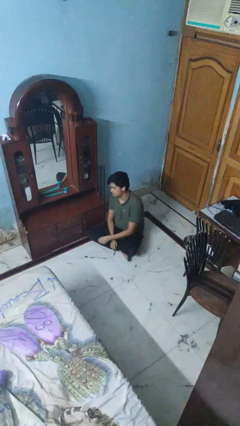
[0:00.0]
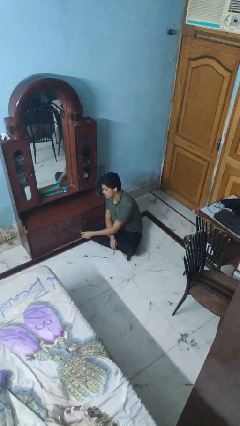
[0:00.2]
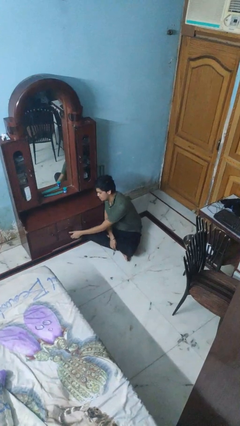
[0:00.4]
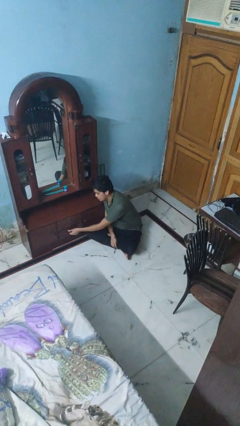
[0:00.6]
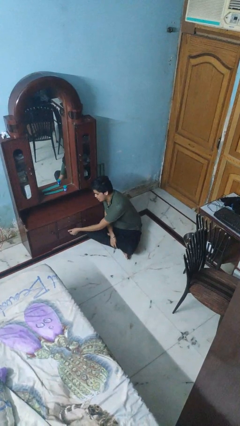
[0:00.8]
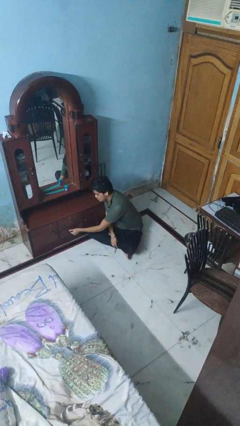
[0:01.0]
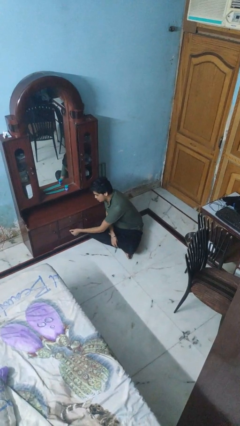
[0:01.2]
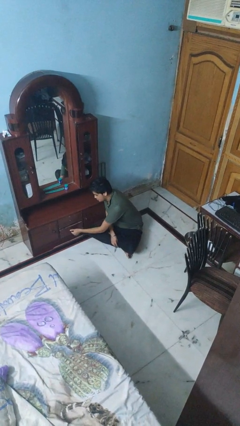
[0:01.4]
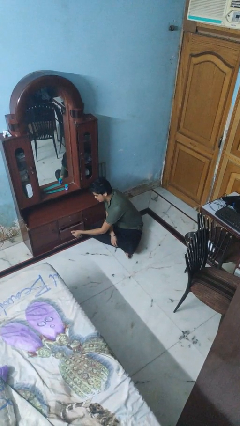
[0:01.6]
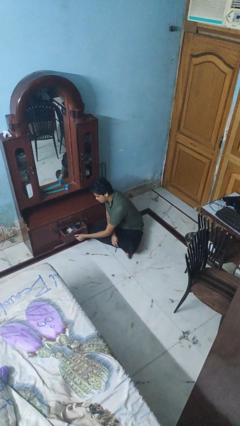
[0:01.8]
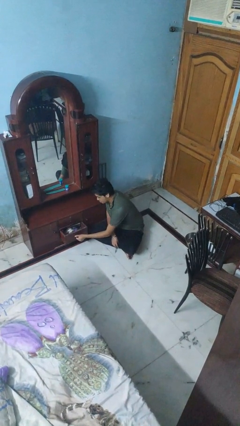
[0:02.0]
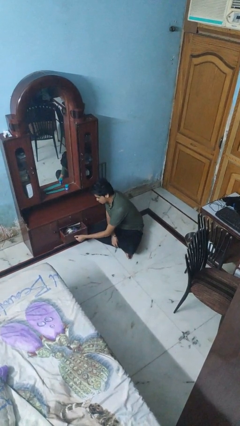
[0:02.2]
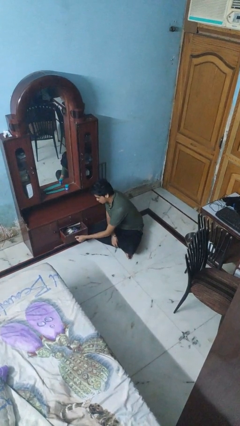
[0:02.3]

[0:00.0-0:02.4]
person opens dresser drawer

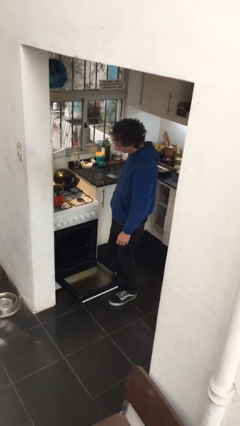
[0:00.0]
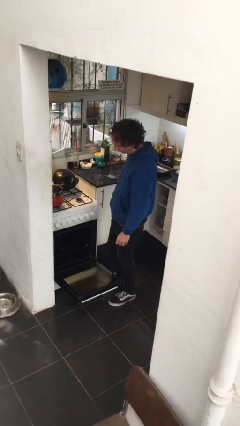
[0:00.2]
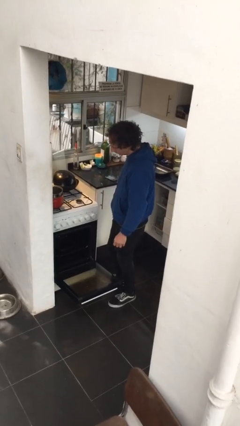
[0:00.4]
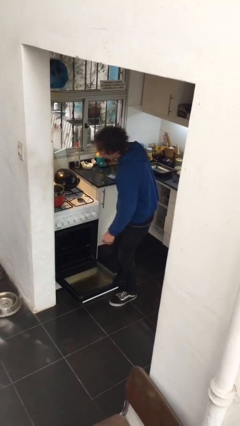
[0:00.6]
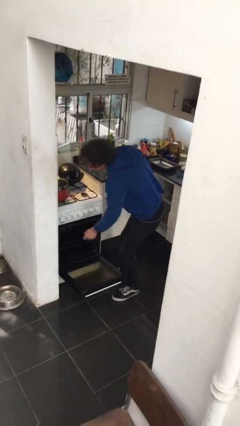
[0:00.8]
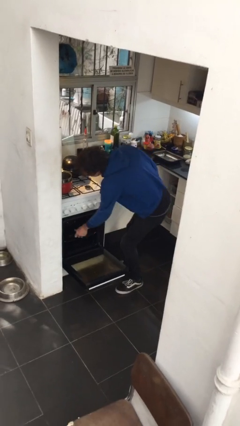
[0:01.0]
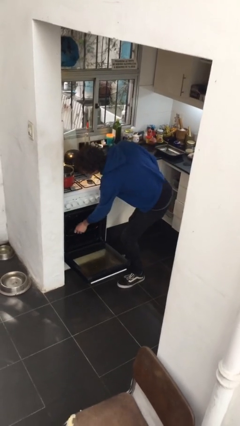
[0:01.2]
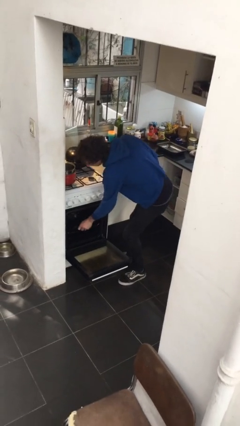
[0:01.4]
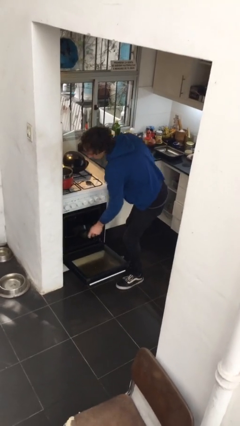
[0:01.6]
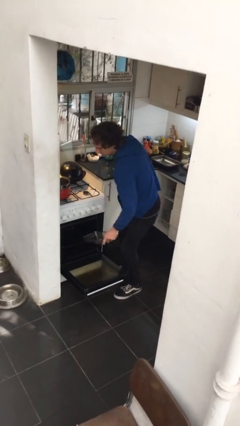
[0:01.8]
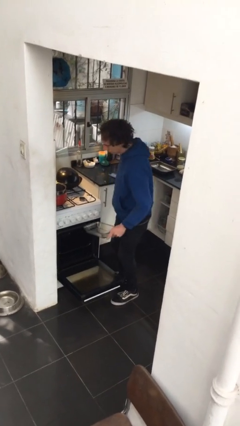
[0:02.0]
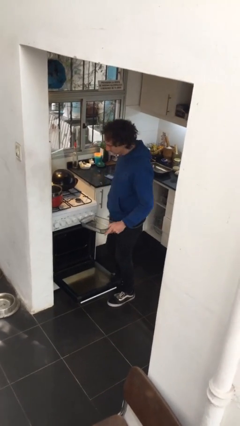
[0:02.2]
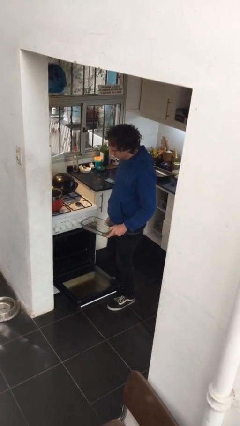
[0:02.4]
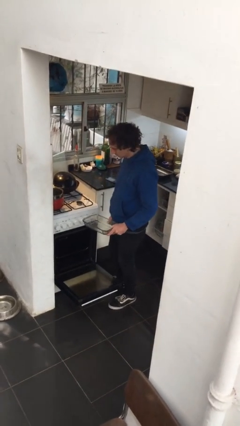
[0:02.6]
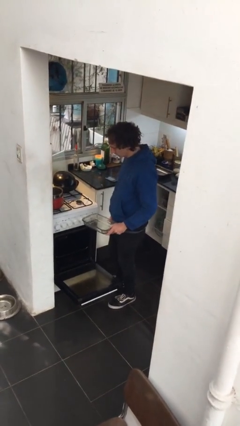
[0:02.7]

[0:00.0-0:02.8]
person takes object from oven

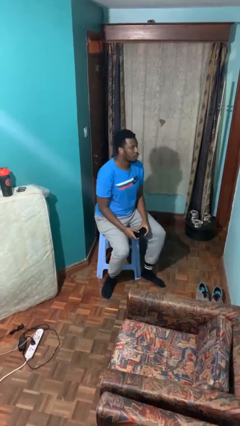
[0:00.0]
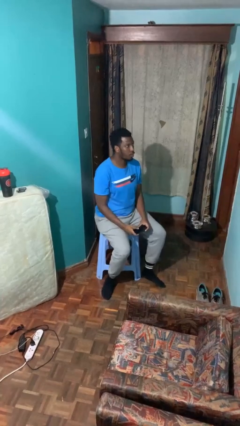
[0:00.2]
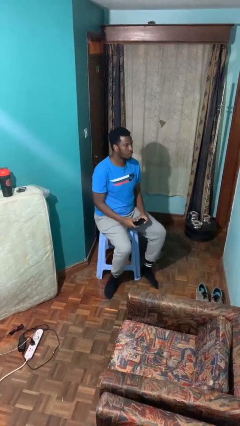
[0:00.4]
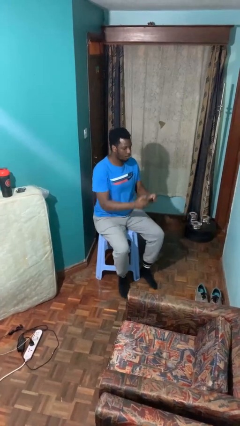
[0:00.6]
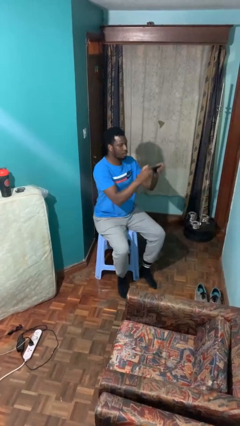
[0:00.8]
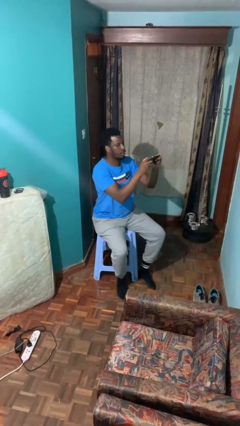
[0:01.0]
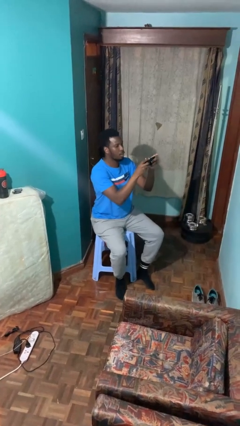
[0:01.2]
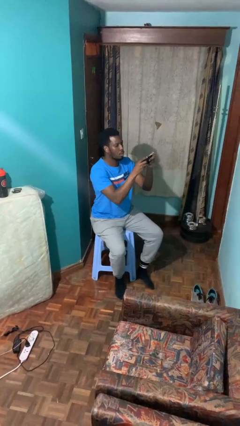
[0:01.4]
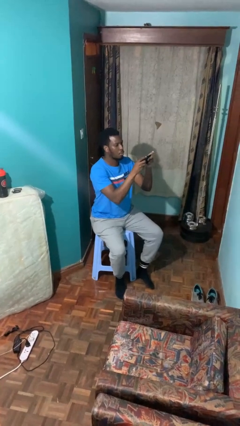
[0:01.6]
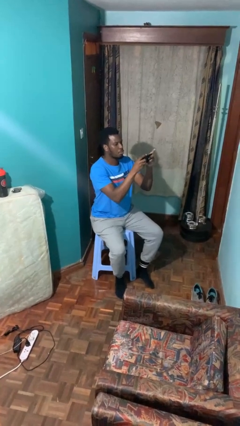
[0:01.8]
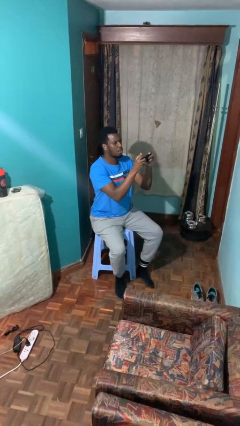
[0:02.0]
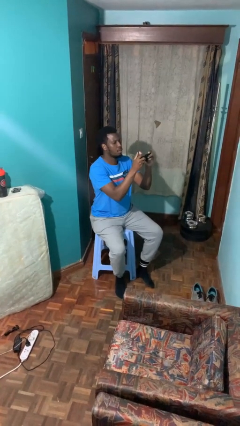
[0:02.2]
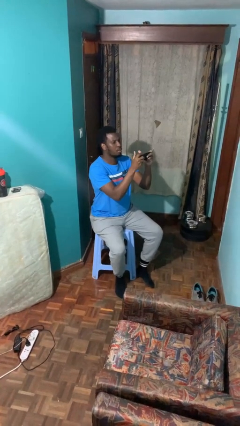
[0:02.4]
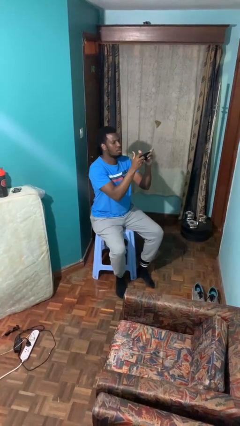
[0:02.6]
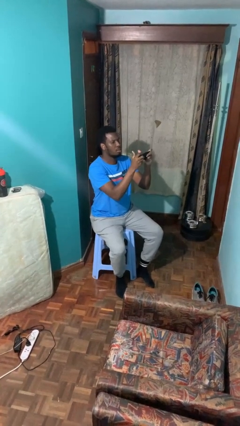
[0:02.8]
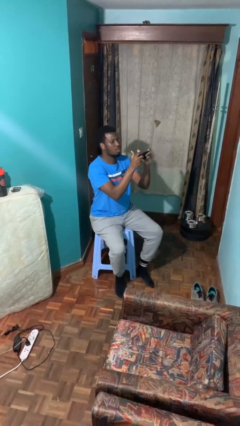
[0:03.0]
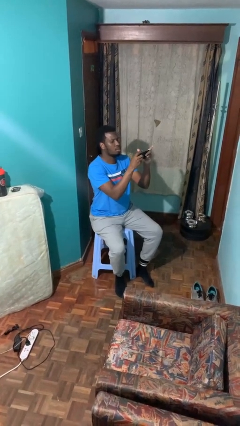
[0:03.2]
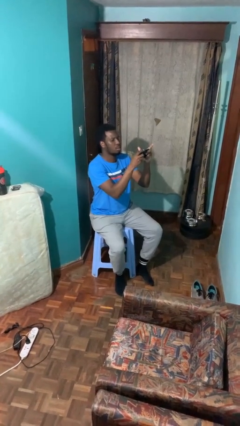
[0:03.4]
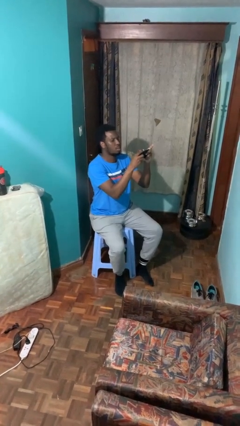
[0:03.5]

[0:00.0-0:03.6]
person interacts with handheld game

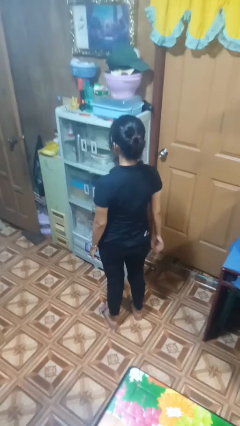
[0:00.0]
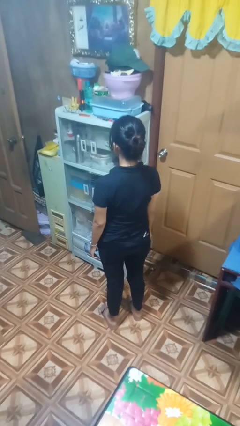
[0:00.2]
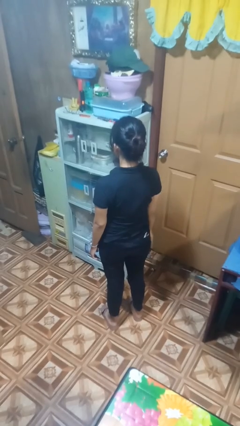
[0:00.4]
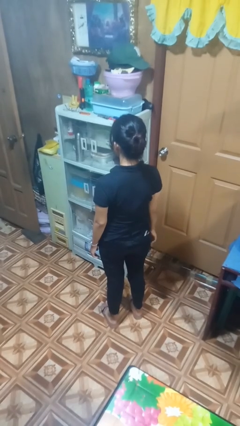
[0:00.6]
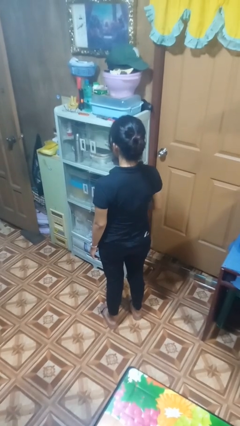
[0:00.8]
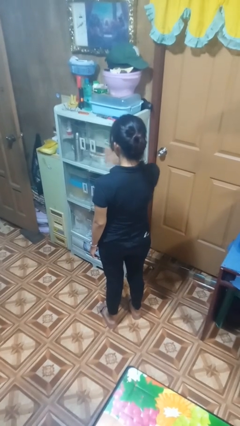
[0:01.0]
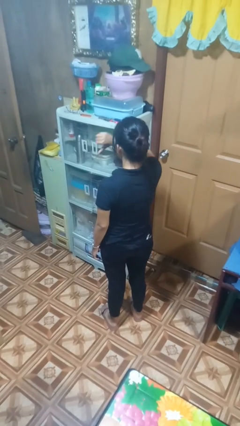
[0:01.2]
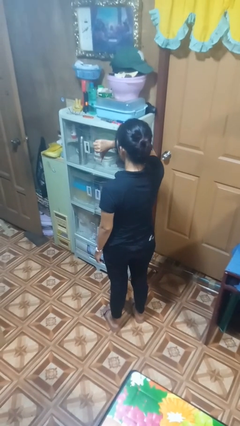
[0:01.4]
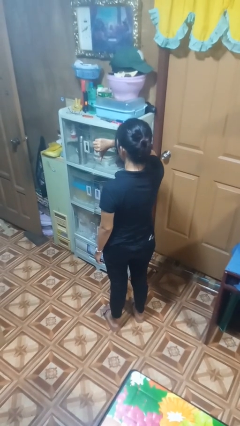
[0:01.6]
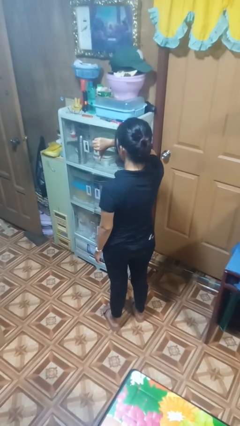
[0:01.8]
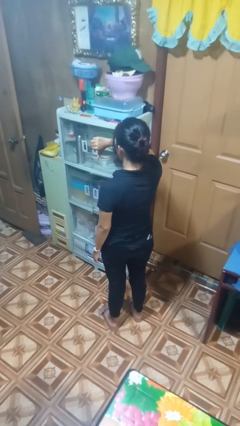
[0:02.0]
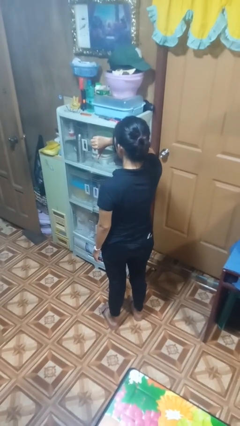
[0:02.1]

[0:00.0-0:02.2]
person gestures thumbs down

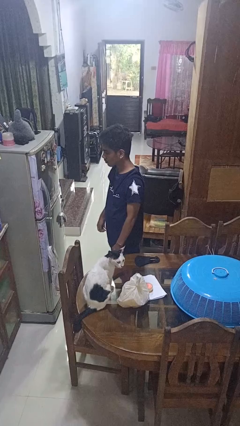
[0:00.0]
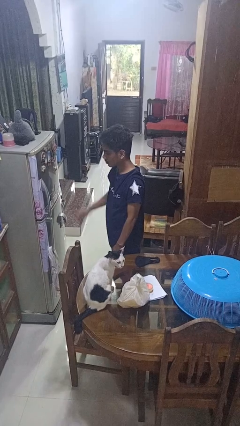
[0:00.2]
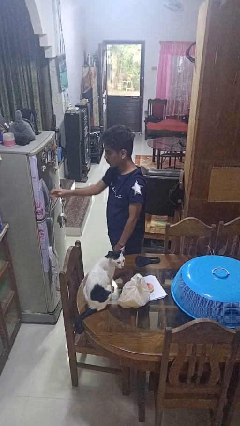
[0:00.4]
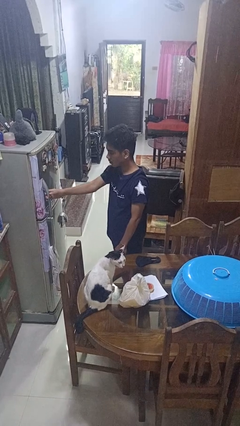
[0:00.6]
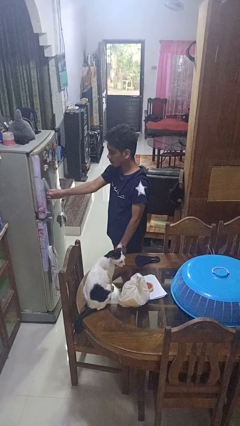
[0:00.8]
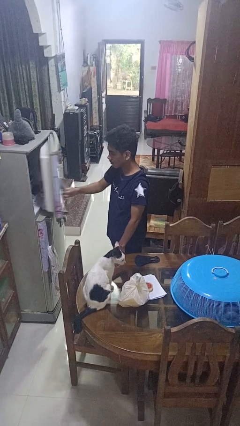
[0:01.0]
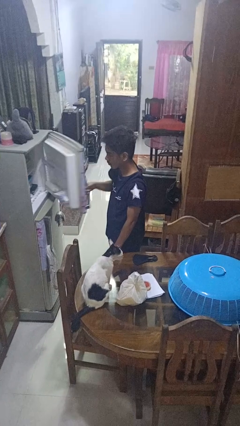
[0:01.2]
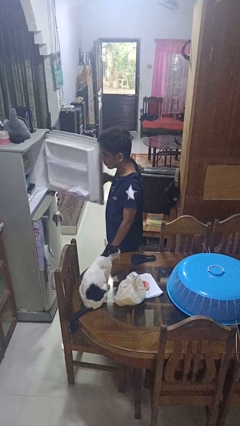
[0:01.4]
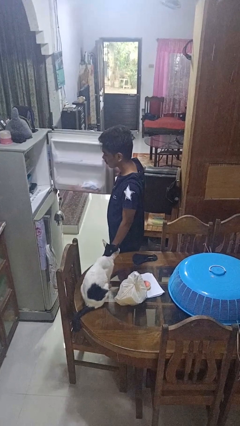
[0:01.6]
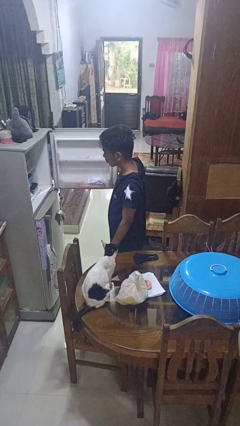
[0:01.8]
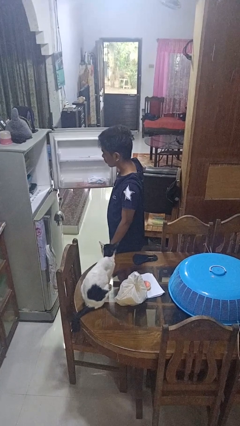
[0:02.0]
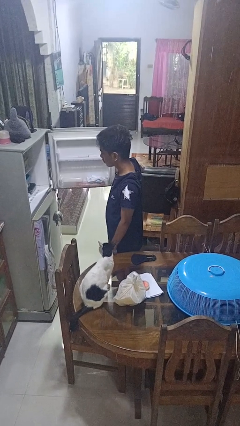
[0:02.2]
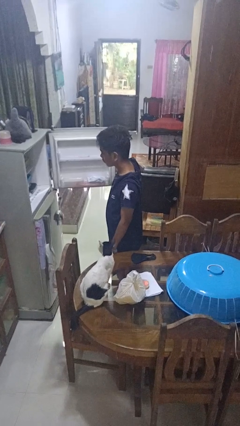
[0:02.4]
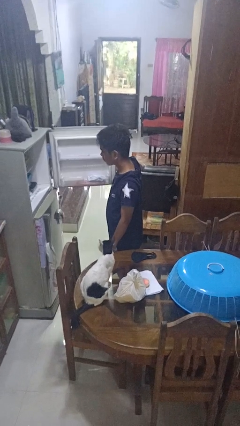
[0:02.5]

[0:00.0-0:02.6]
person opens refrigerator

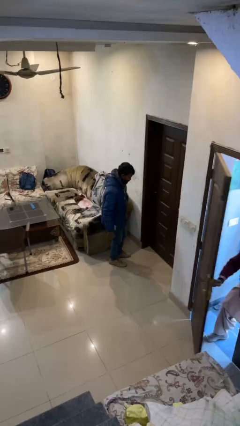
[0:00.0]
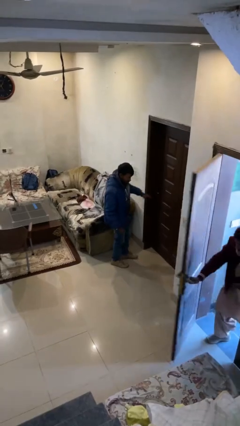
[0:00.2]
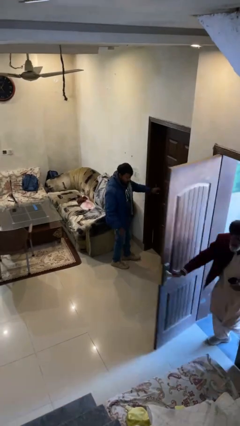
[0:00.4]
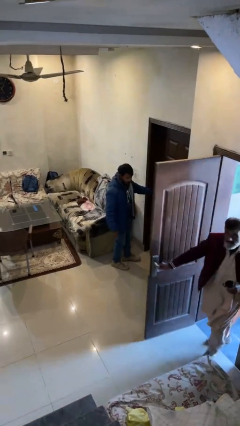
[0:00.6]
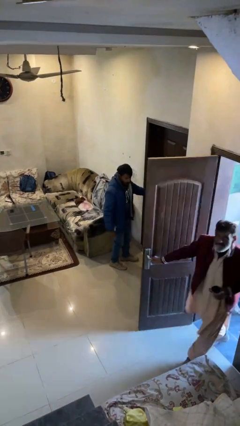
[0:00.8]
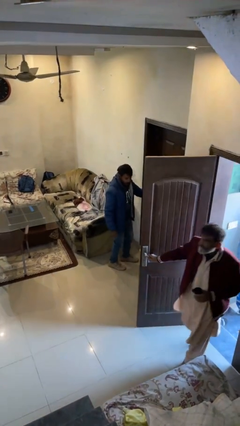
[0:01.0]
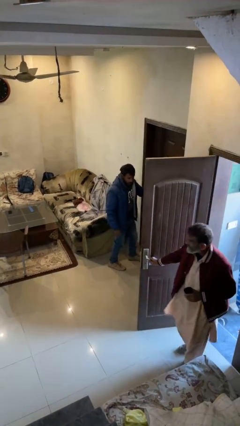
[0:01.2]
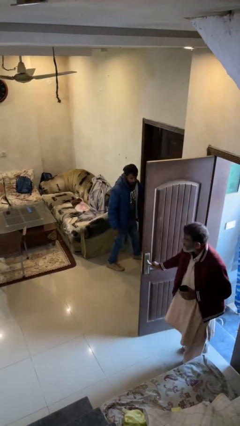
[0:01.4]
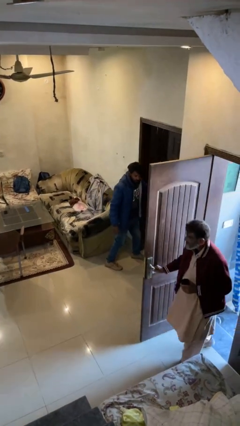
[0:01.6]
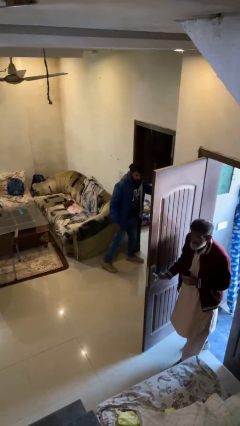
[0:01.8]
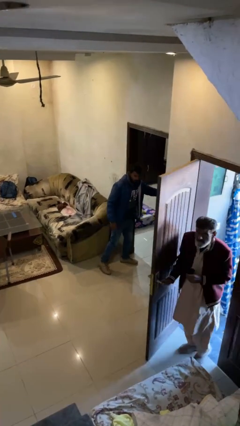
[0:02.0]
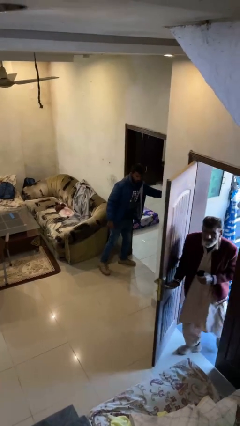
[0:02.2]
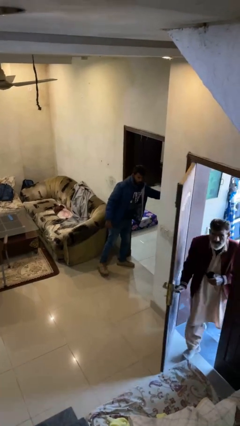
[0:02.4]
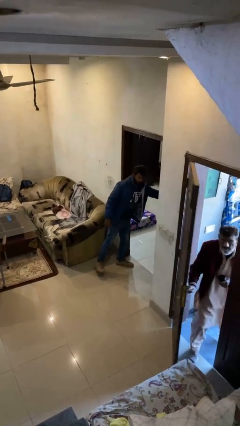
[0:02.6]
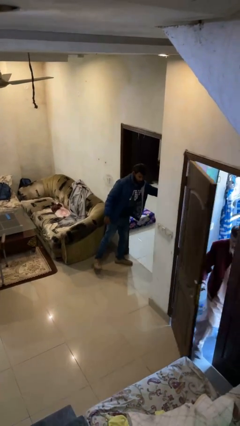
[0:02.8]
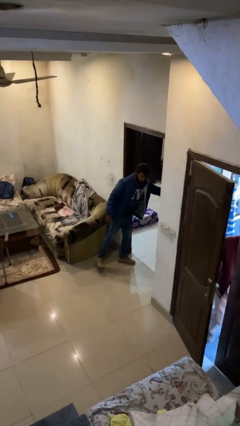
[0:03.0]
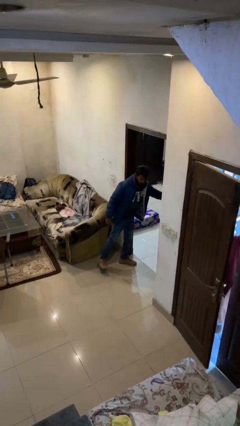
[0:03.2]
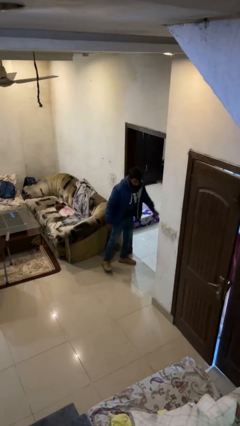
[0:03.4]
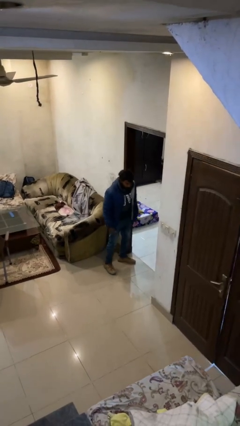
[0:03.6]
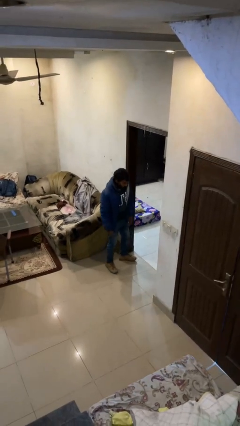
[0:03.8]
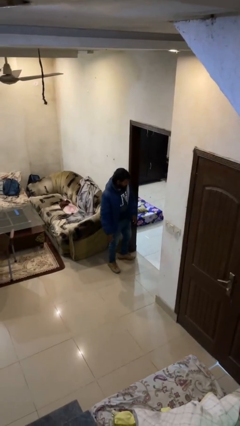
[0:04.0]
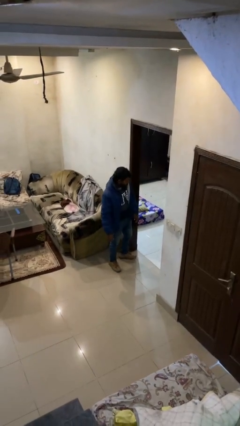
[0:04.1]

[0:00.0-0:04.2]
person opens facility door
